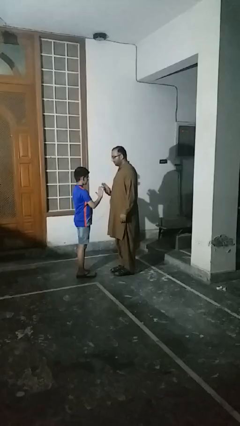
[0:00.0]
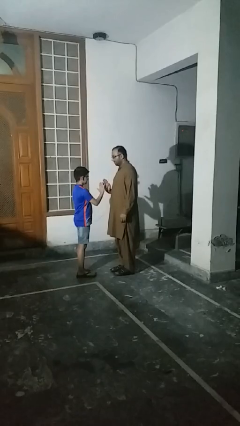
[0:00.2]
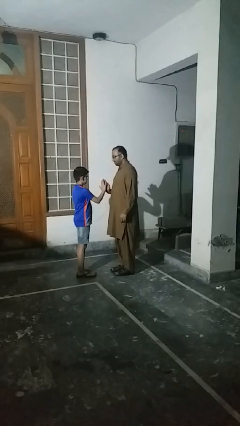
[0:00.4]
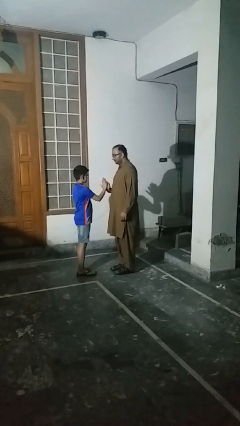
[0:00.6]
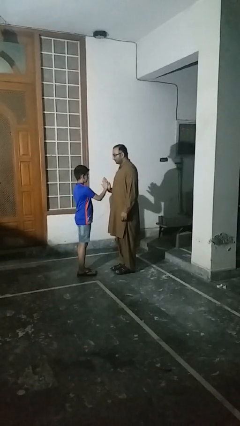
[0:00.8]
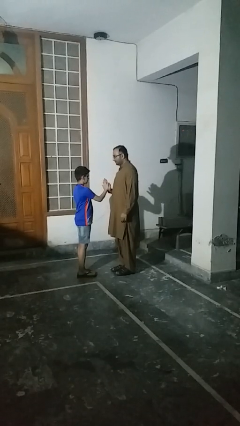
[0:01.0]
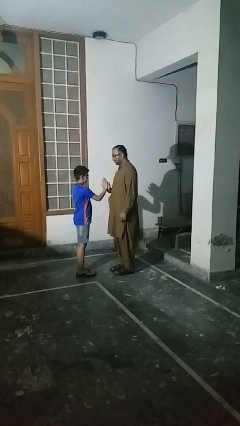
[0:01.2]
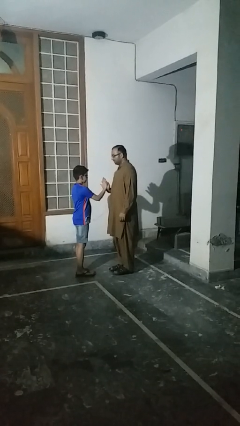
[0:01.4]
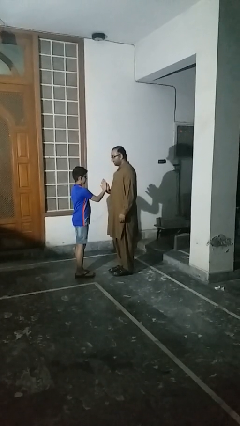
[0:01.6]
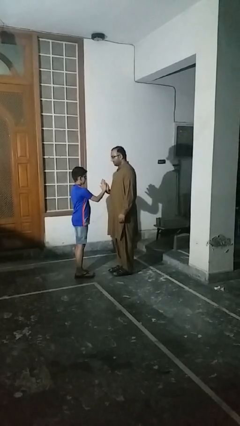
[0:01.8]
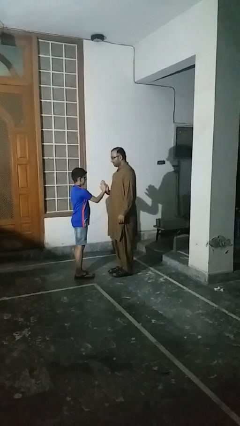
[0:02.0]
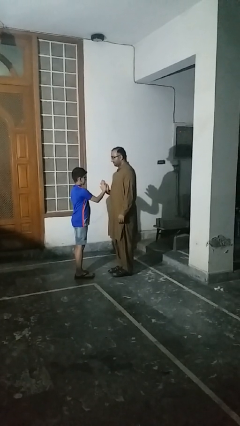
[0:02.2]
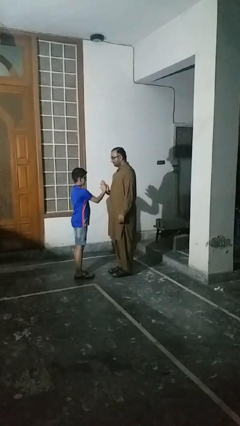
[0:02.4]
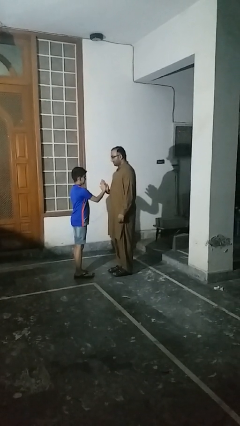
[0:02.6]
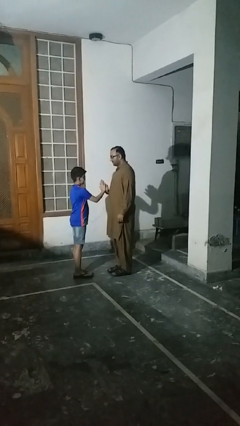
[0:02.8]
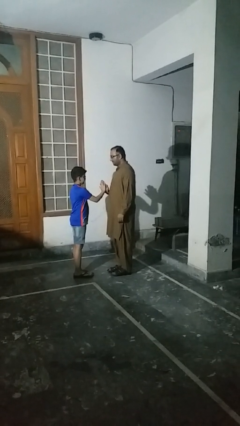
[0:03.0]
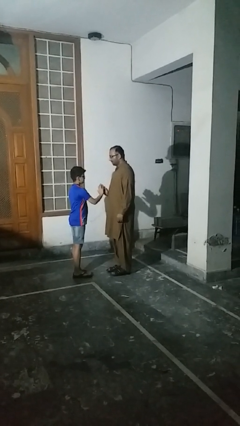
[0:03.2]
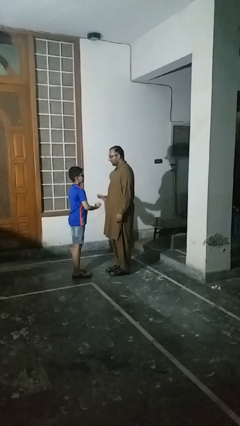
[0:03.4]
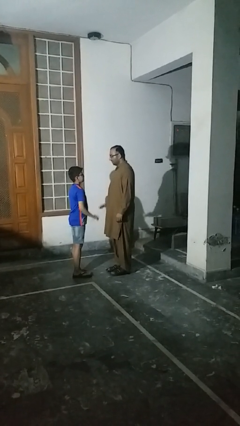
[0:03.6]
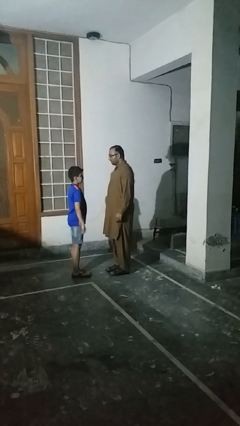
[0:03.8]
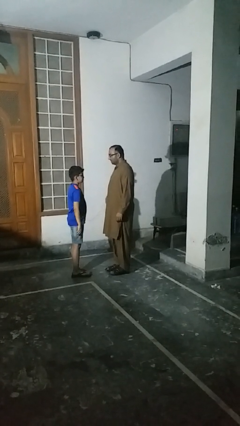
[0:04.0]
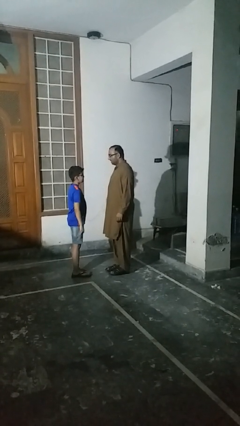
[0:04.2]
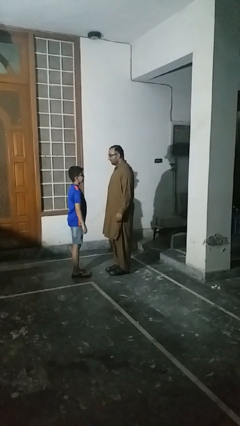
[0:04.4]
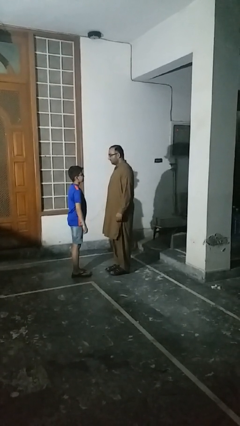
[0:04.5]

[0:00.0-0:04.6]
person highfives hand

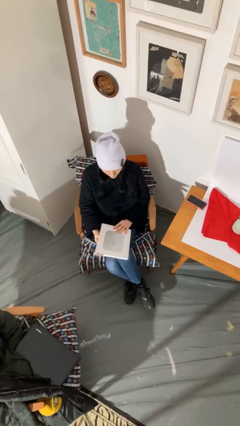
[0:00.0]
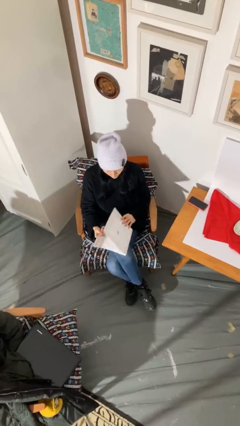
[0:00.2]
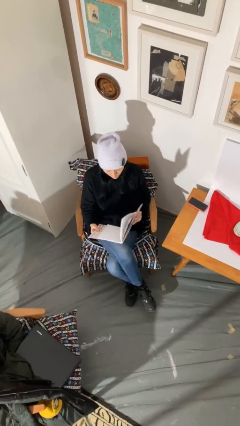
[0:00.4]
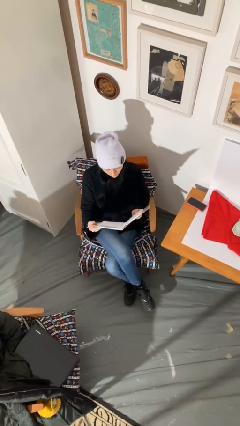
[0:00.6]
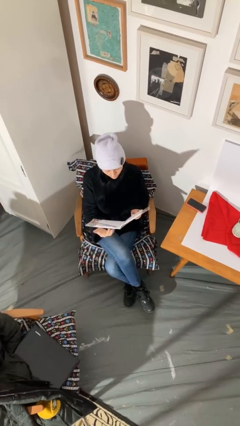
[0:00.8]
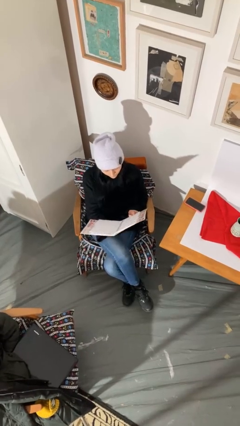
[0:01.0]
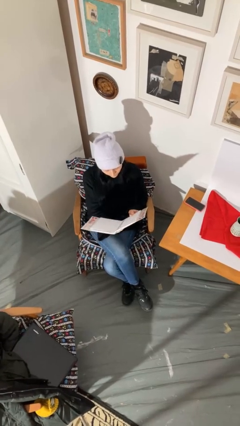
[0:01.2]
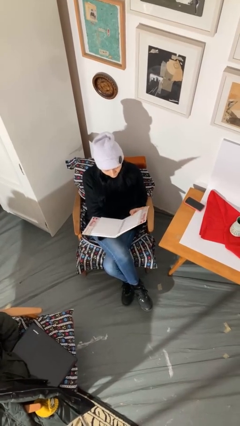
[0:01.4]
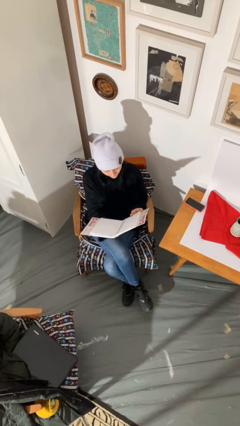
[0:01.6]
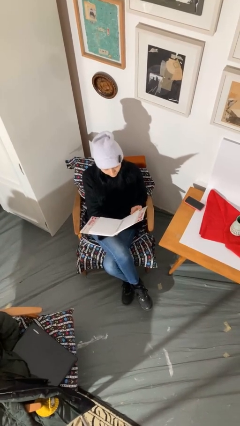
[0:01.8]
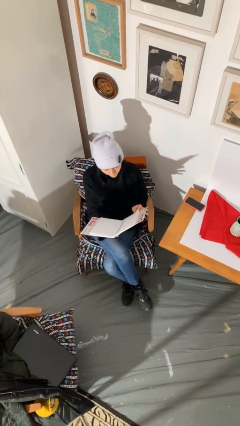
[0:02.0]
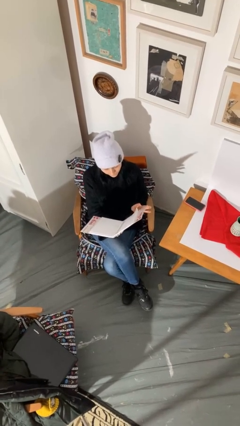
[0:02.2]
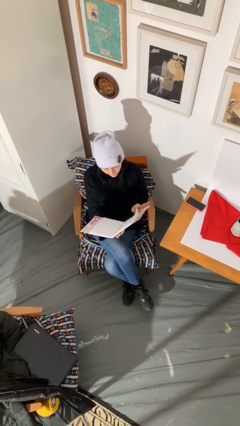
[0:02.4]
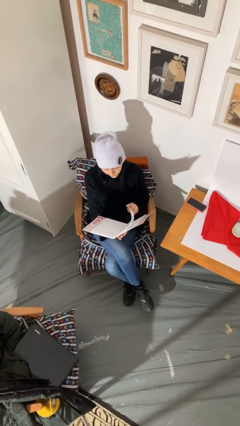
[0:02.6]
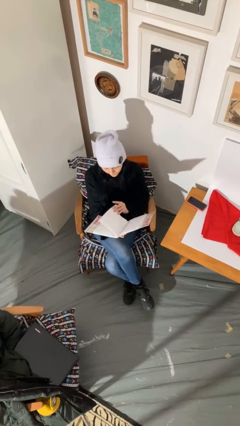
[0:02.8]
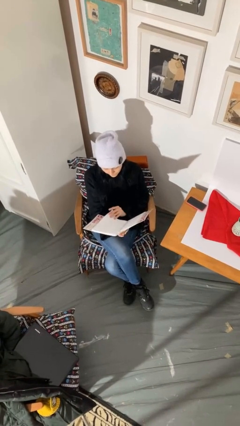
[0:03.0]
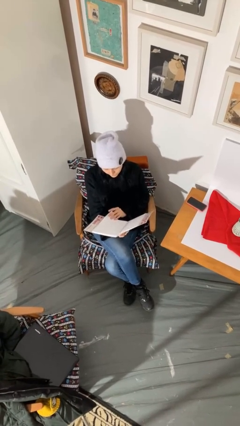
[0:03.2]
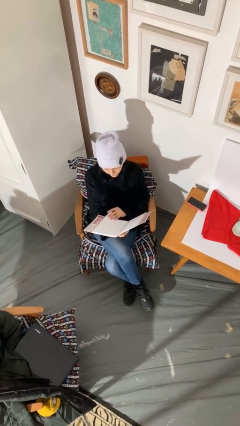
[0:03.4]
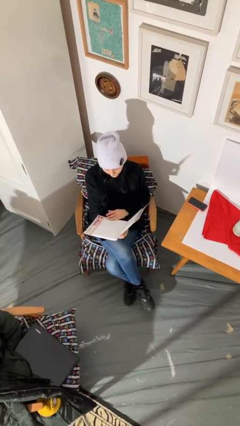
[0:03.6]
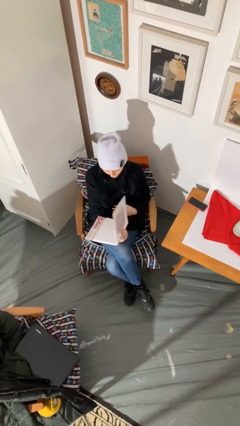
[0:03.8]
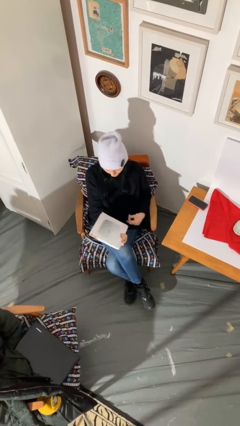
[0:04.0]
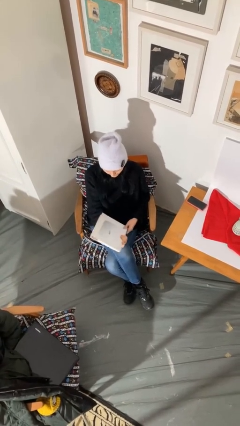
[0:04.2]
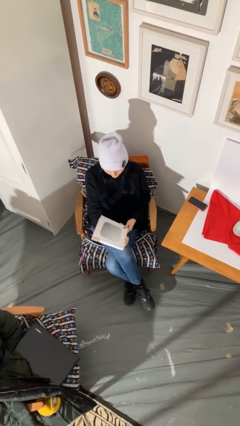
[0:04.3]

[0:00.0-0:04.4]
person reads document

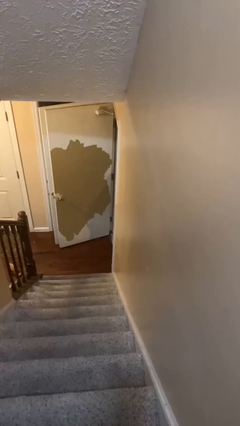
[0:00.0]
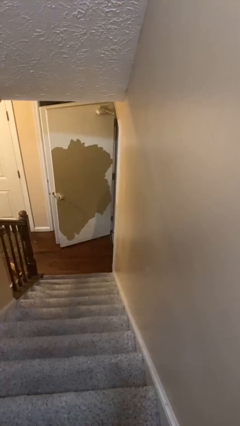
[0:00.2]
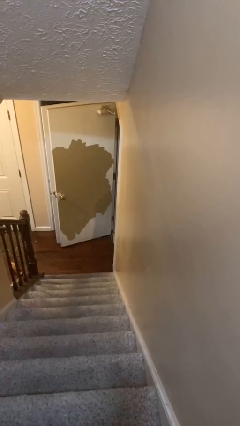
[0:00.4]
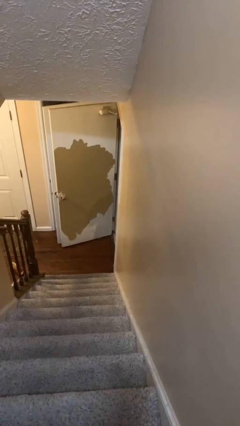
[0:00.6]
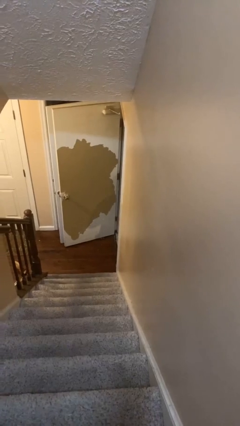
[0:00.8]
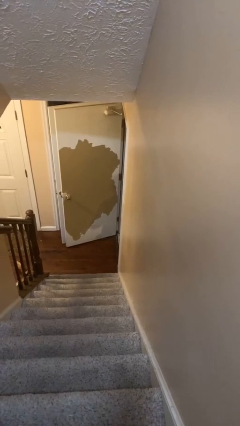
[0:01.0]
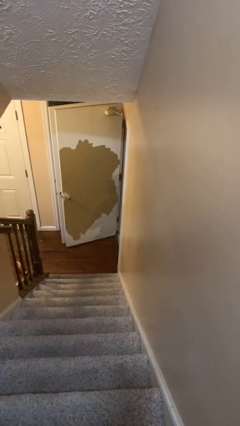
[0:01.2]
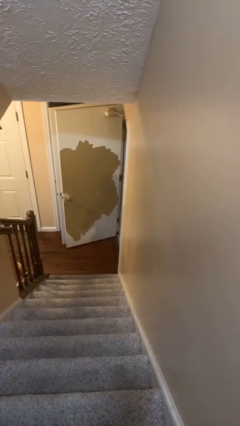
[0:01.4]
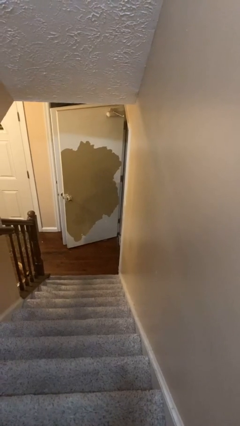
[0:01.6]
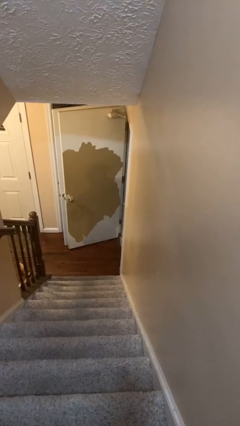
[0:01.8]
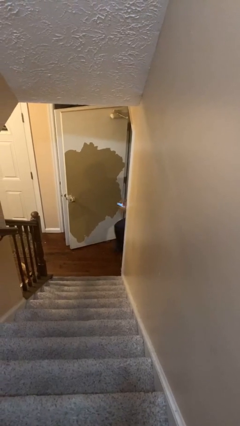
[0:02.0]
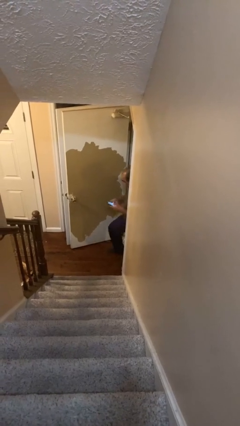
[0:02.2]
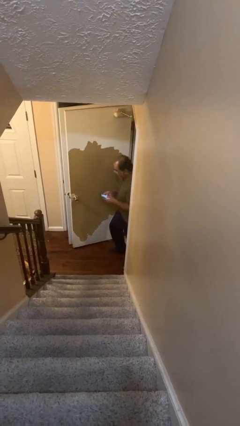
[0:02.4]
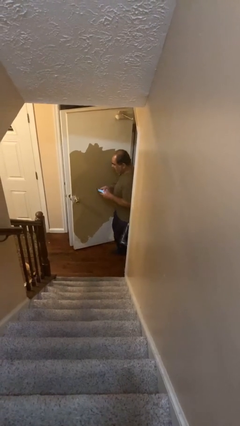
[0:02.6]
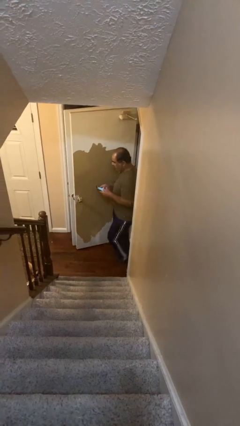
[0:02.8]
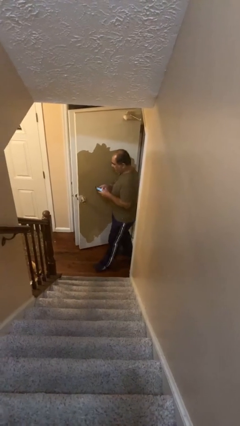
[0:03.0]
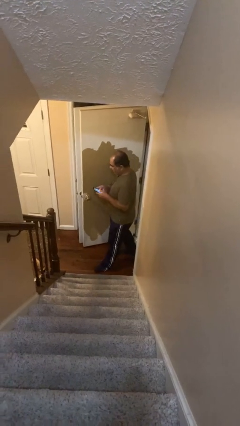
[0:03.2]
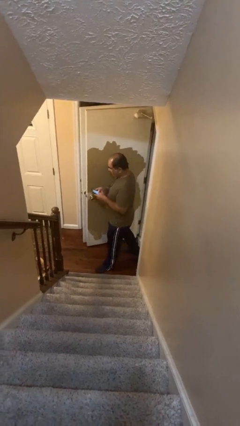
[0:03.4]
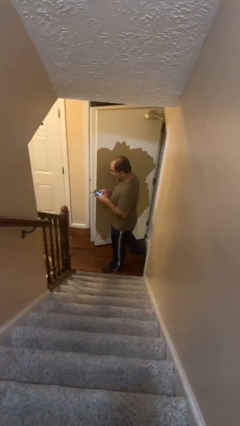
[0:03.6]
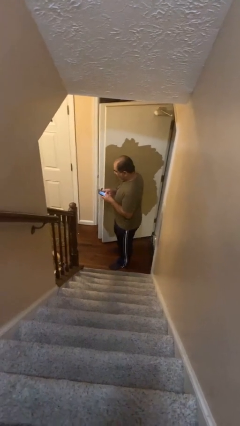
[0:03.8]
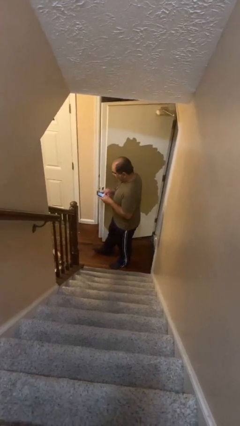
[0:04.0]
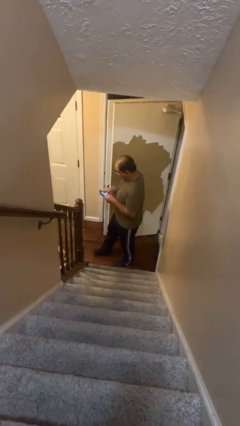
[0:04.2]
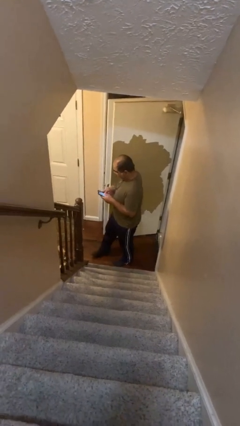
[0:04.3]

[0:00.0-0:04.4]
person enters scene through structure

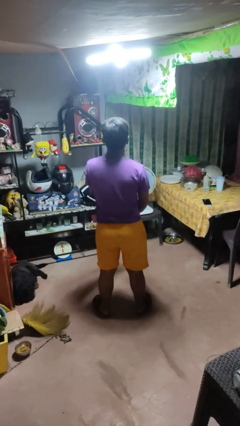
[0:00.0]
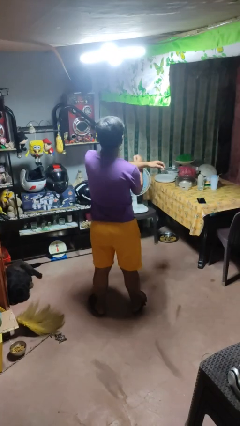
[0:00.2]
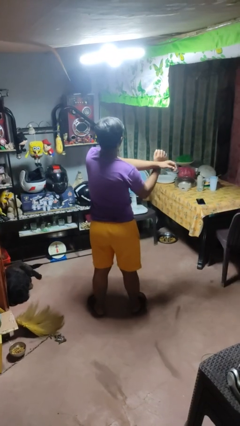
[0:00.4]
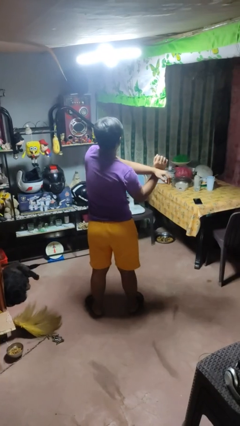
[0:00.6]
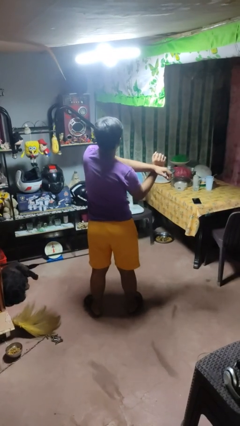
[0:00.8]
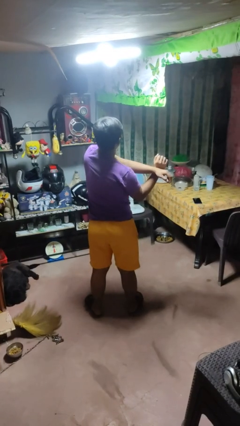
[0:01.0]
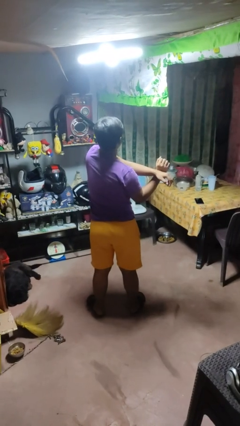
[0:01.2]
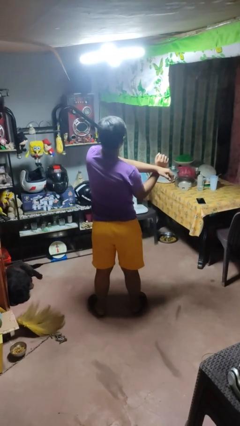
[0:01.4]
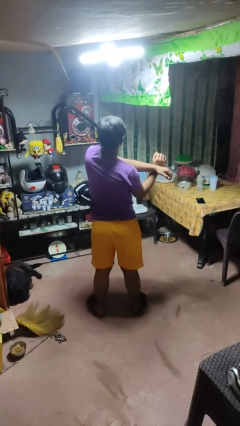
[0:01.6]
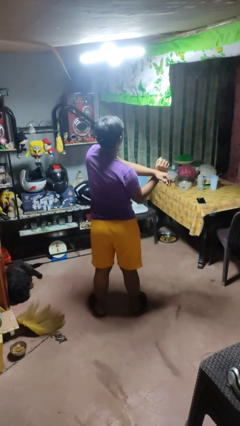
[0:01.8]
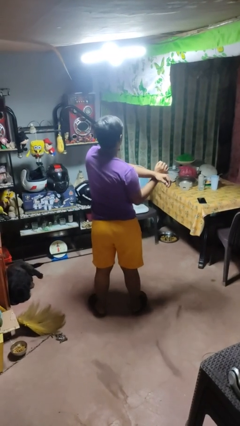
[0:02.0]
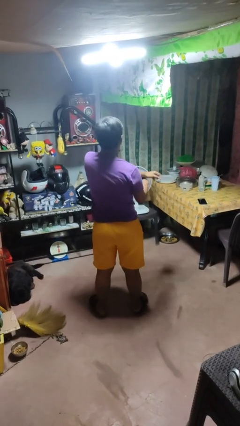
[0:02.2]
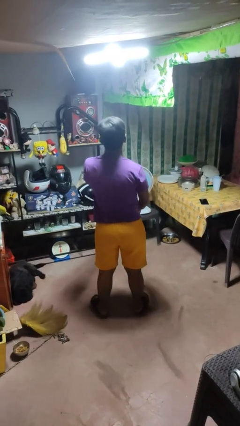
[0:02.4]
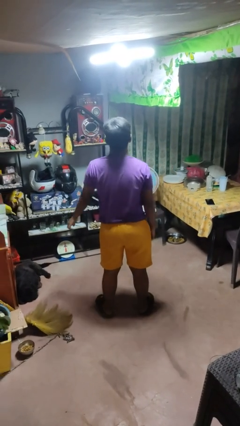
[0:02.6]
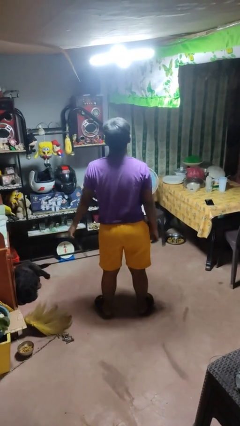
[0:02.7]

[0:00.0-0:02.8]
person crosses arms

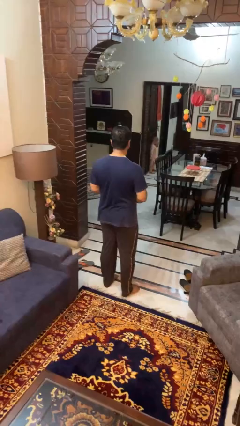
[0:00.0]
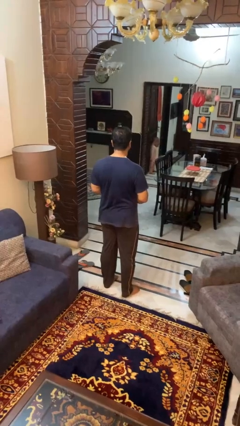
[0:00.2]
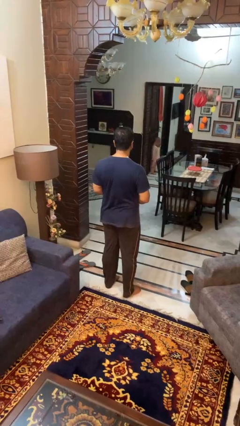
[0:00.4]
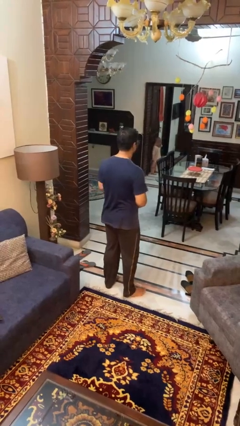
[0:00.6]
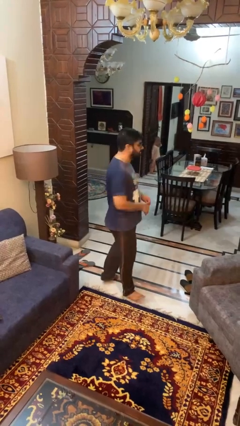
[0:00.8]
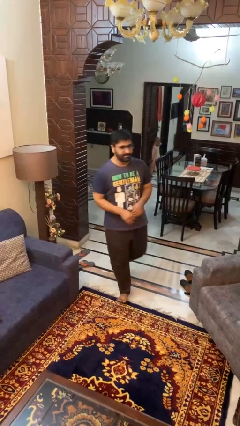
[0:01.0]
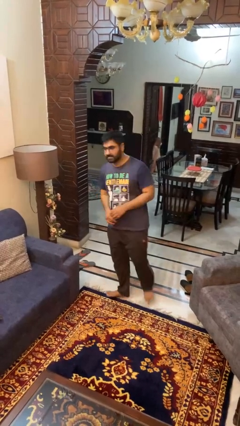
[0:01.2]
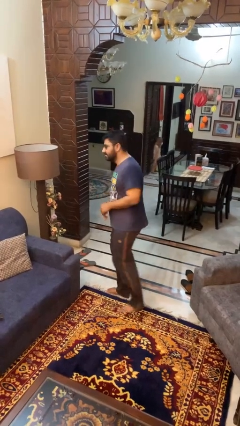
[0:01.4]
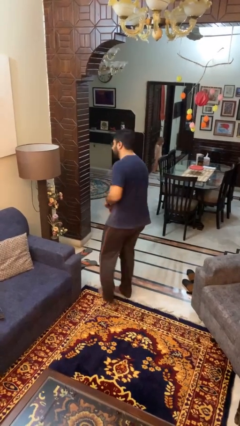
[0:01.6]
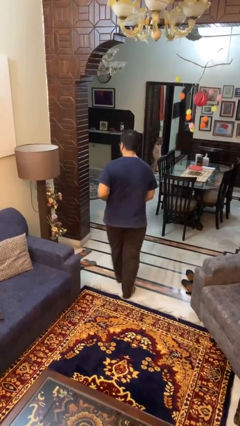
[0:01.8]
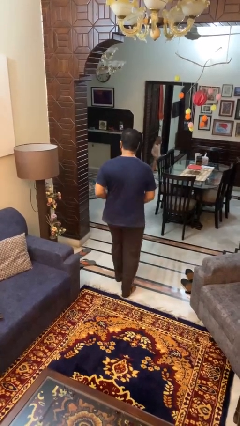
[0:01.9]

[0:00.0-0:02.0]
person twirls
